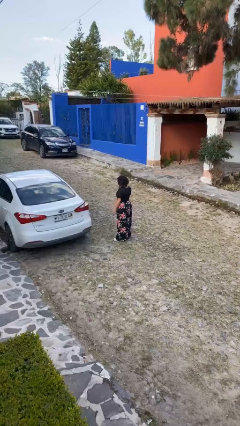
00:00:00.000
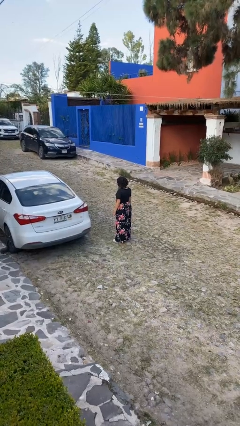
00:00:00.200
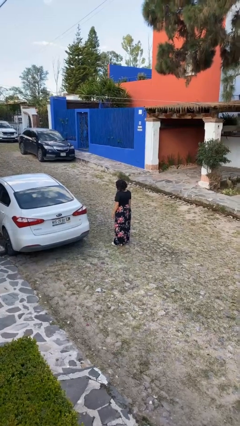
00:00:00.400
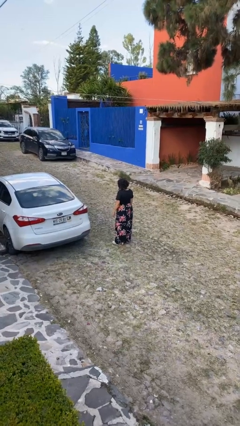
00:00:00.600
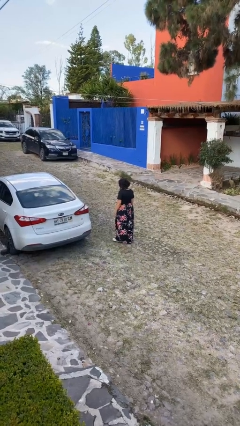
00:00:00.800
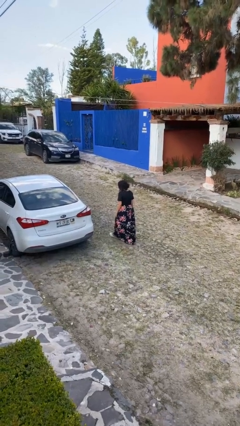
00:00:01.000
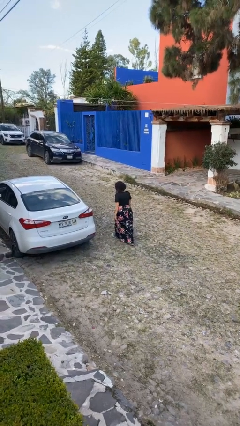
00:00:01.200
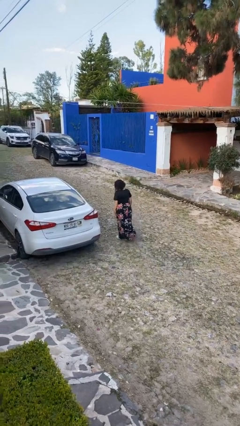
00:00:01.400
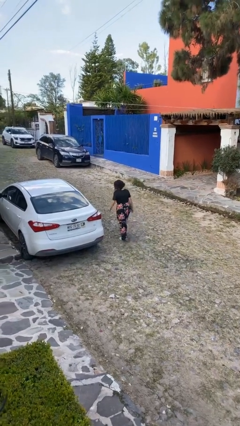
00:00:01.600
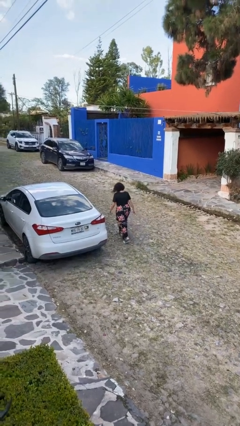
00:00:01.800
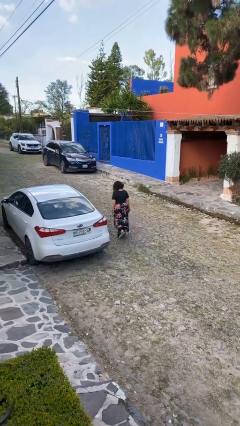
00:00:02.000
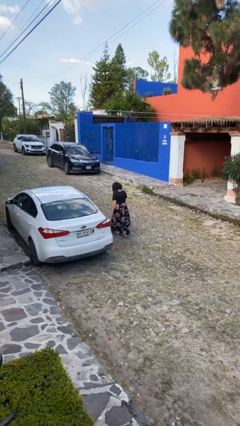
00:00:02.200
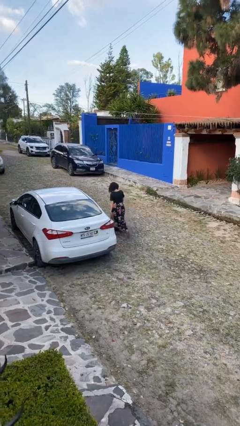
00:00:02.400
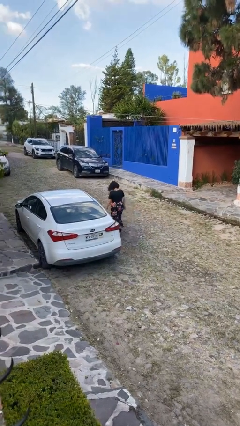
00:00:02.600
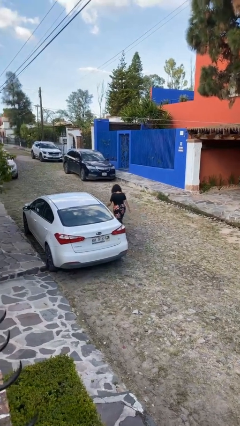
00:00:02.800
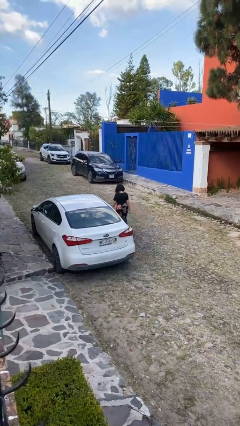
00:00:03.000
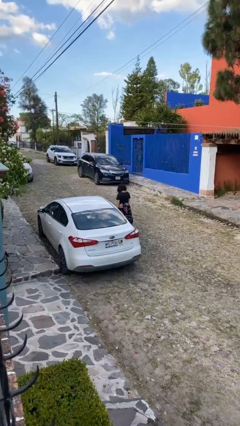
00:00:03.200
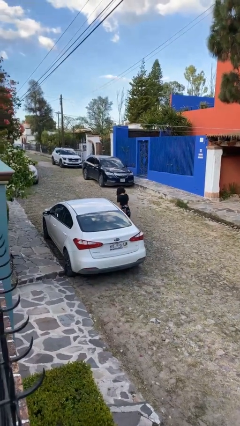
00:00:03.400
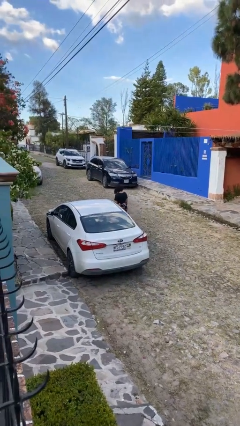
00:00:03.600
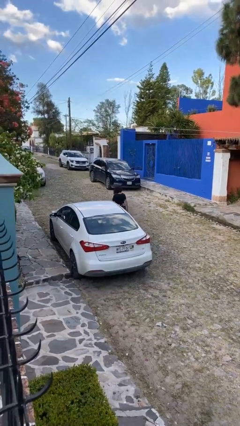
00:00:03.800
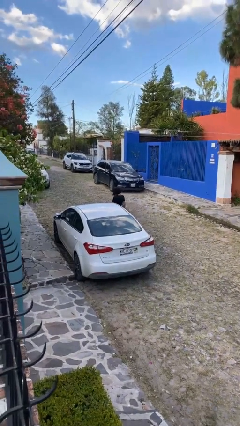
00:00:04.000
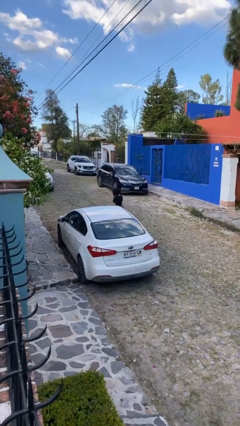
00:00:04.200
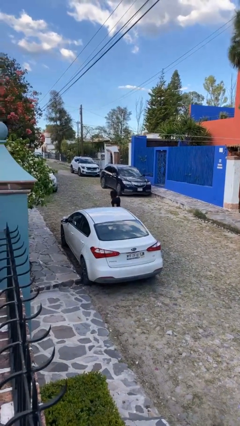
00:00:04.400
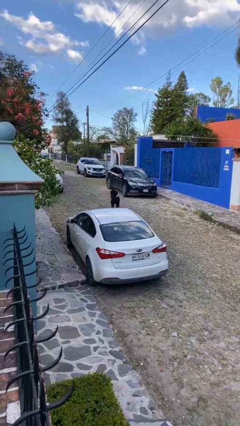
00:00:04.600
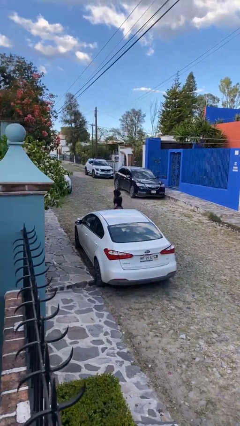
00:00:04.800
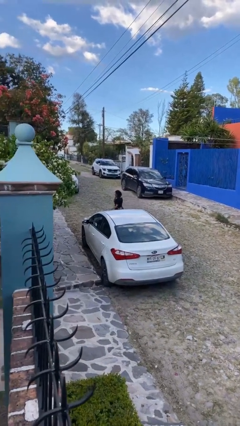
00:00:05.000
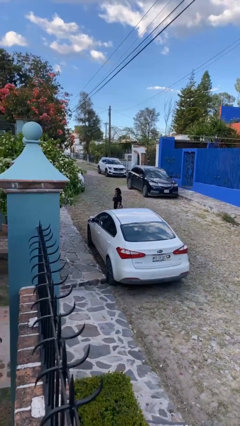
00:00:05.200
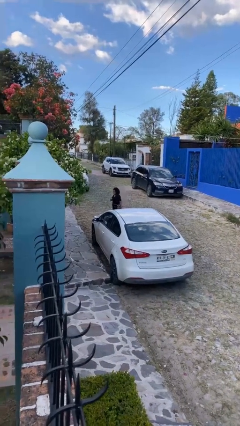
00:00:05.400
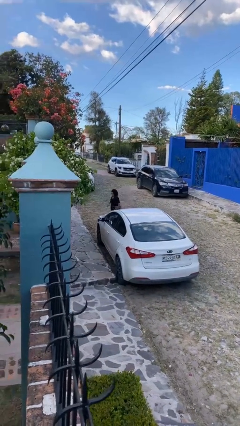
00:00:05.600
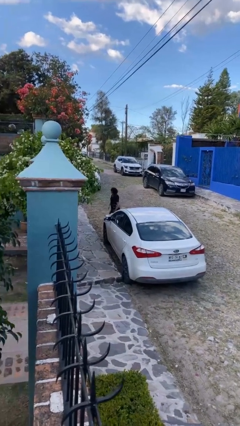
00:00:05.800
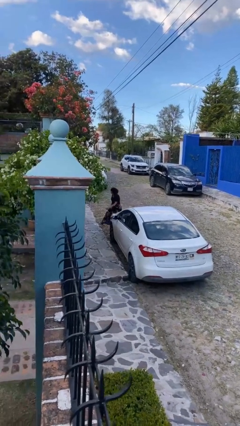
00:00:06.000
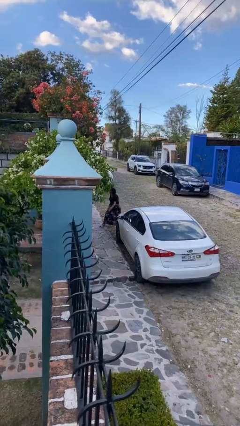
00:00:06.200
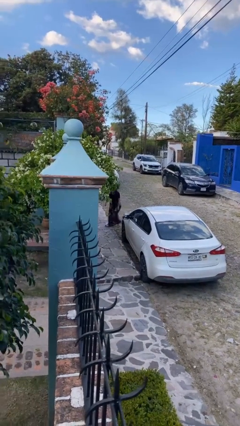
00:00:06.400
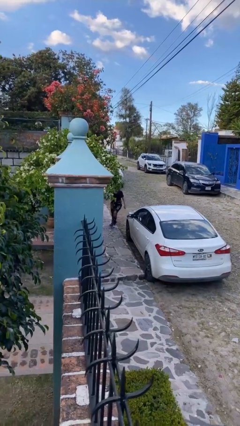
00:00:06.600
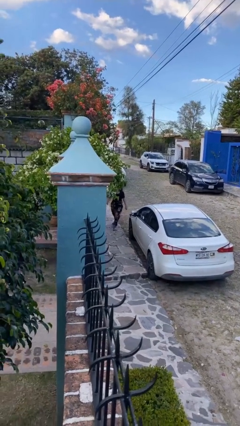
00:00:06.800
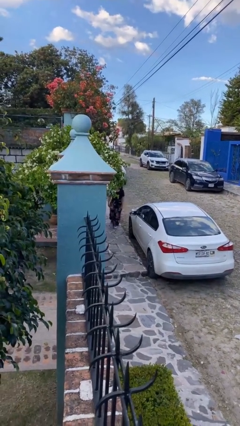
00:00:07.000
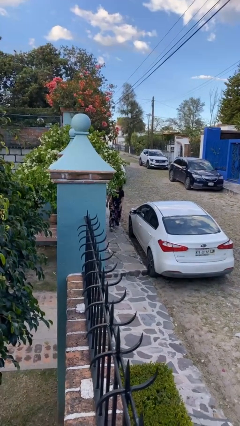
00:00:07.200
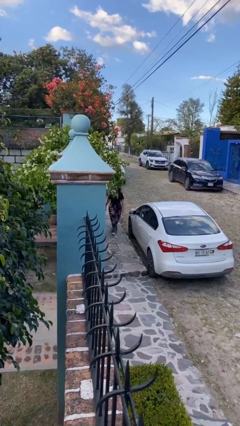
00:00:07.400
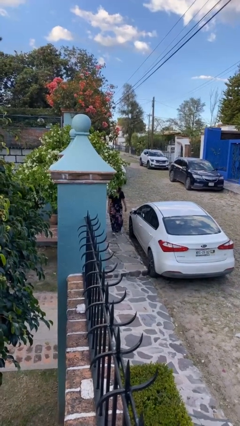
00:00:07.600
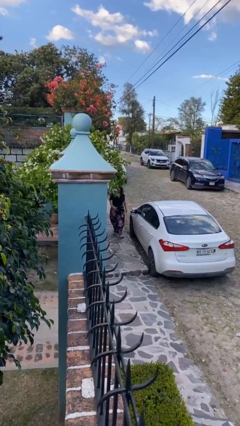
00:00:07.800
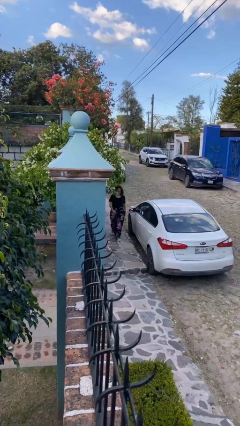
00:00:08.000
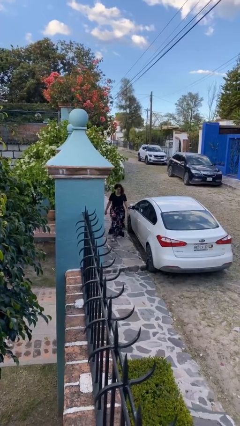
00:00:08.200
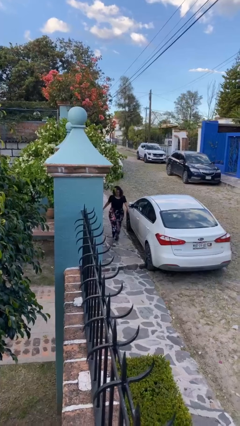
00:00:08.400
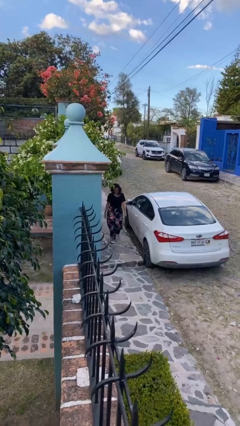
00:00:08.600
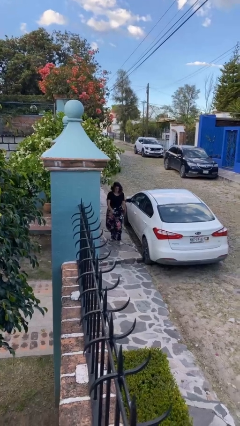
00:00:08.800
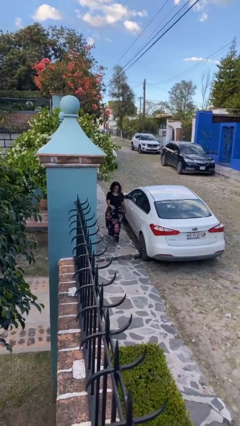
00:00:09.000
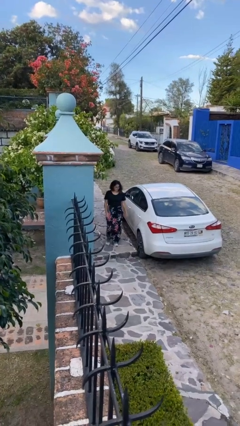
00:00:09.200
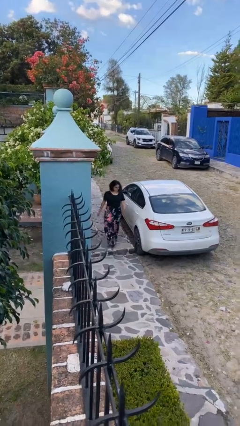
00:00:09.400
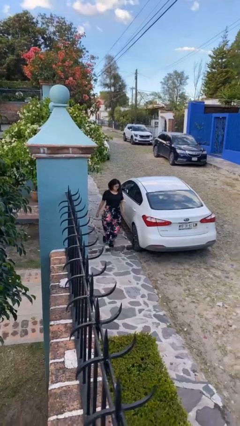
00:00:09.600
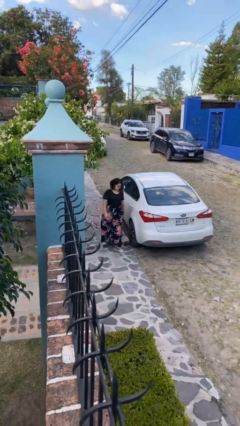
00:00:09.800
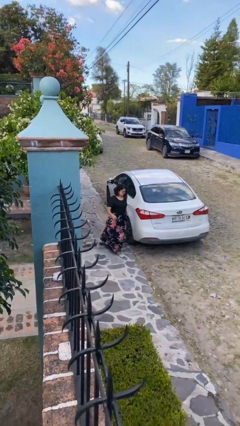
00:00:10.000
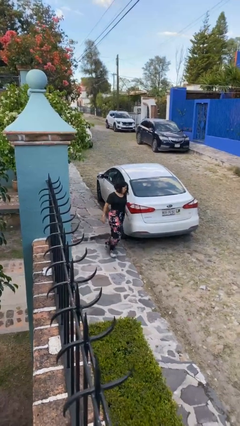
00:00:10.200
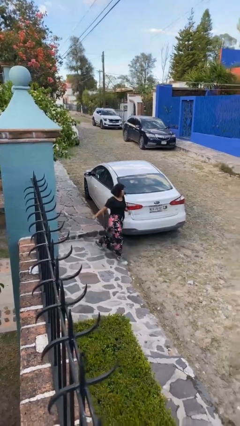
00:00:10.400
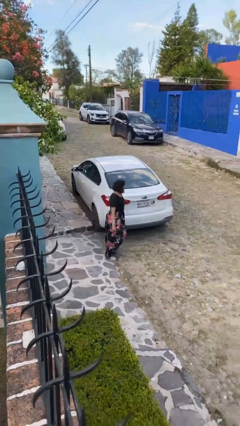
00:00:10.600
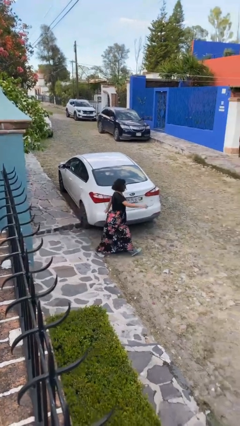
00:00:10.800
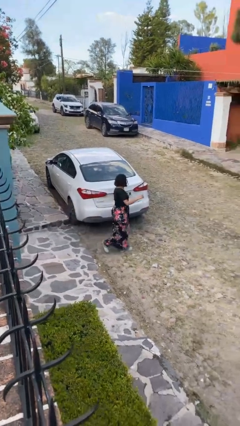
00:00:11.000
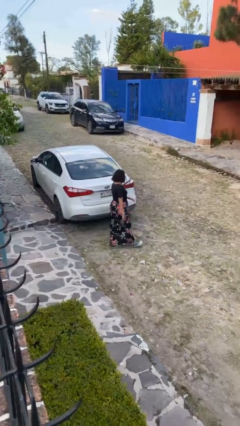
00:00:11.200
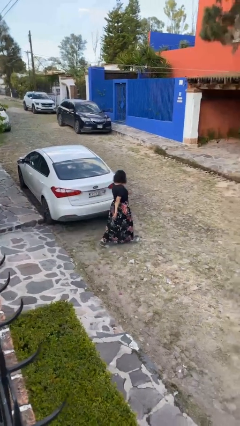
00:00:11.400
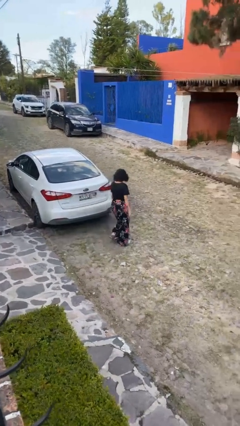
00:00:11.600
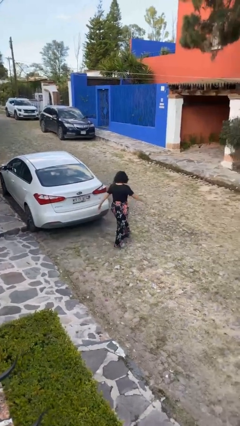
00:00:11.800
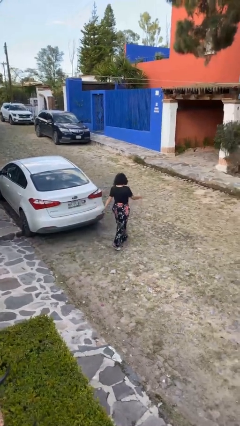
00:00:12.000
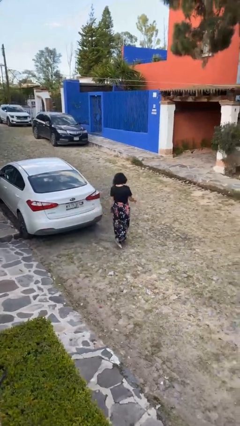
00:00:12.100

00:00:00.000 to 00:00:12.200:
person walks around car

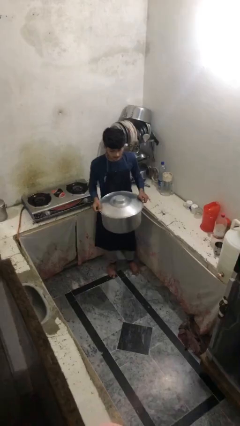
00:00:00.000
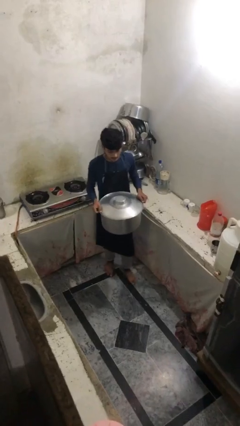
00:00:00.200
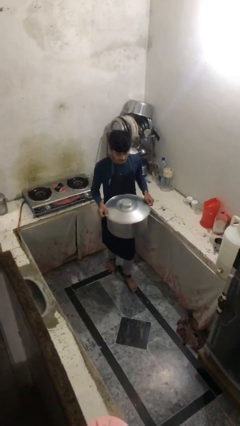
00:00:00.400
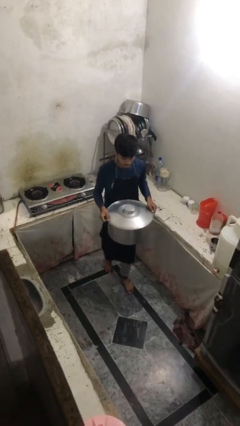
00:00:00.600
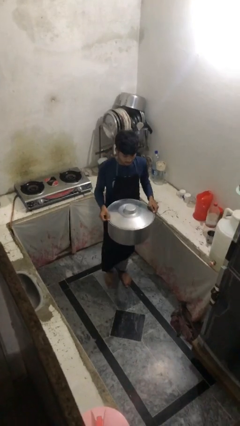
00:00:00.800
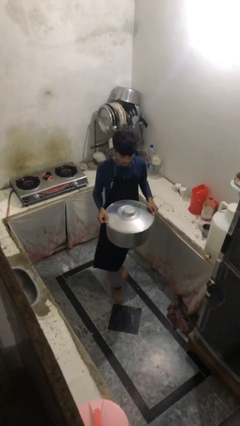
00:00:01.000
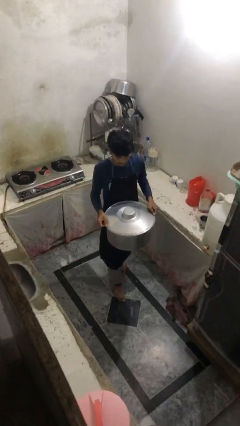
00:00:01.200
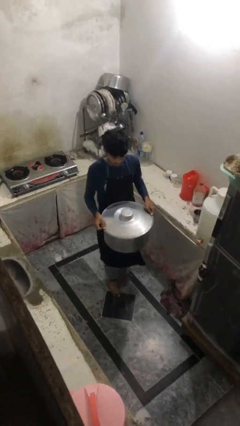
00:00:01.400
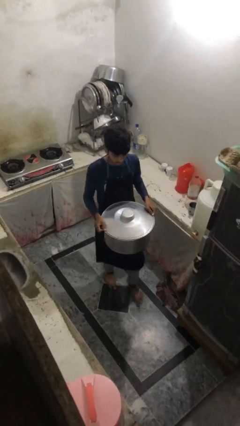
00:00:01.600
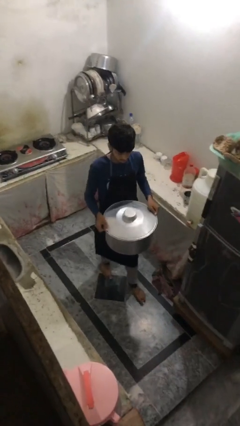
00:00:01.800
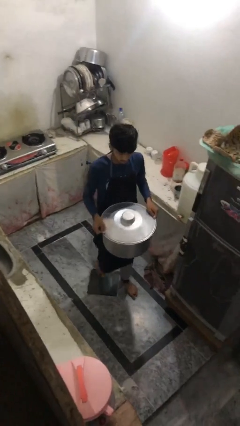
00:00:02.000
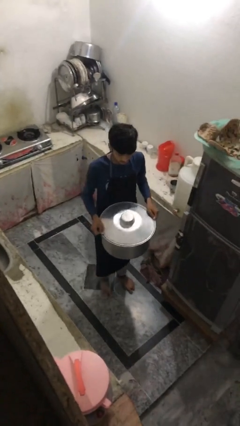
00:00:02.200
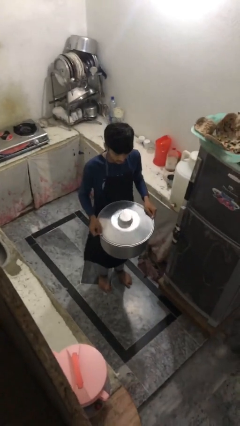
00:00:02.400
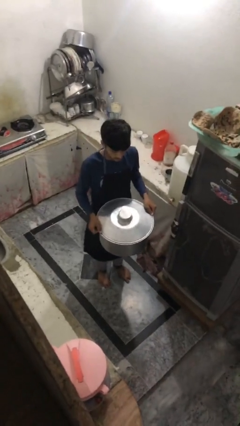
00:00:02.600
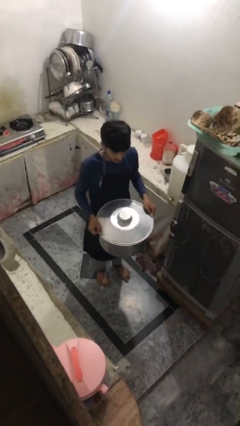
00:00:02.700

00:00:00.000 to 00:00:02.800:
person carries heavy object

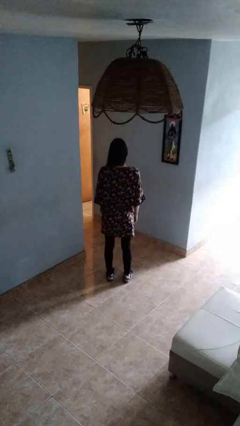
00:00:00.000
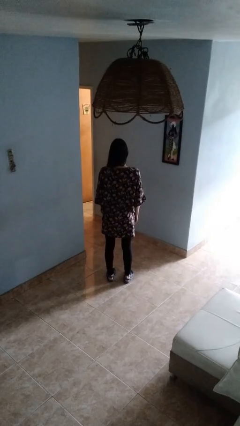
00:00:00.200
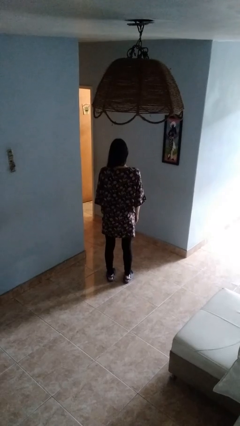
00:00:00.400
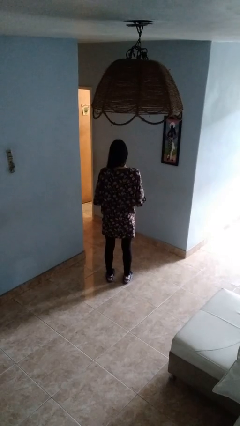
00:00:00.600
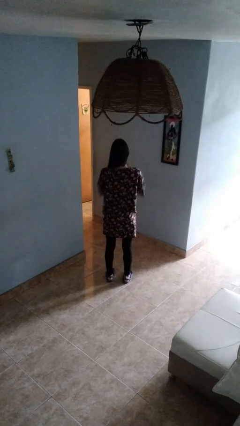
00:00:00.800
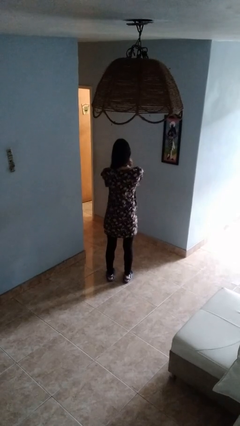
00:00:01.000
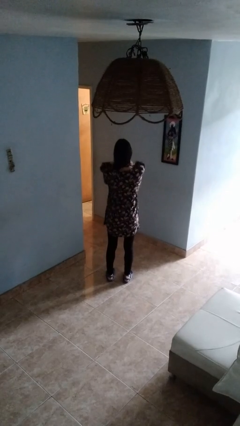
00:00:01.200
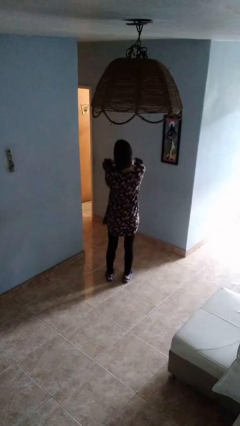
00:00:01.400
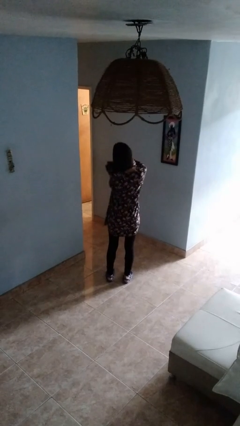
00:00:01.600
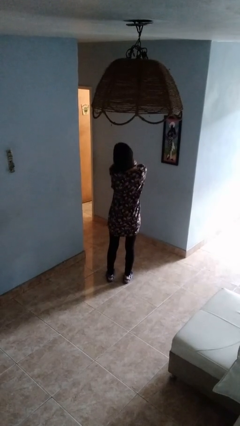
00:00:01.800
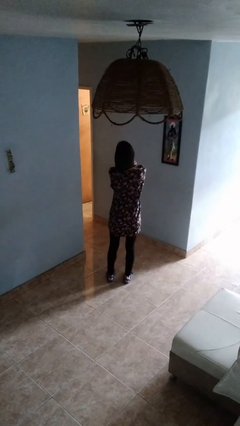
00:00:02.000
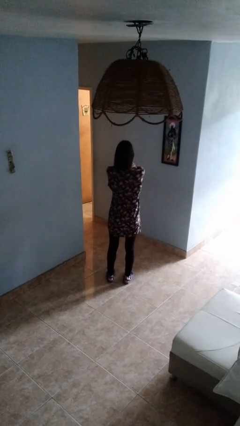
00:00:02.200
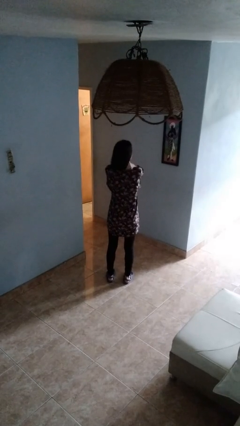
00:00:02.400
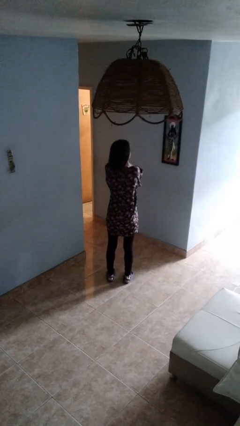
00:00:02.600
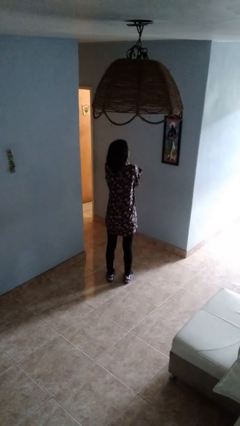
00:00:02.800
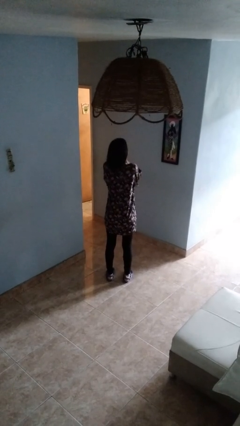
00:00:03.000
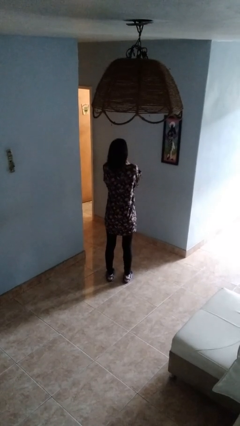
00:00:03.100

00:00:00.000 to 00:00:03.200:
person rubs neck
